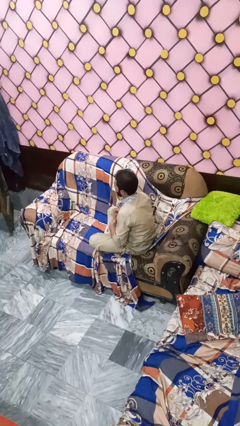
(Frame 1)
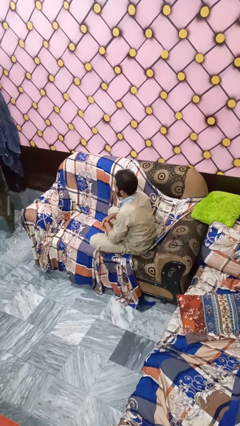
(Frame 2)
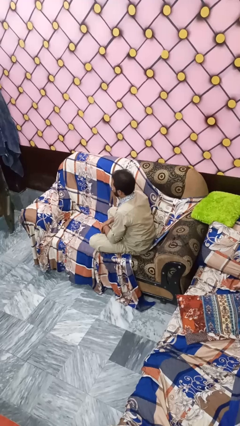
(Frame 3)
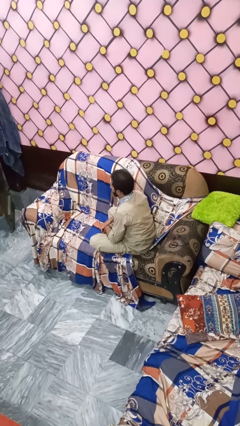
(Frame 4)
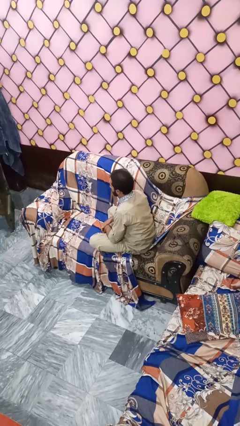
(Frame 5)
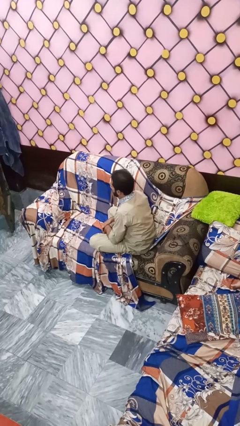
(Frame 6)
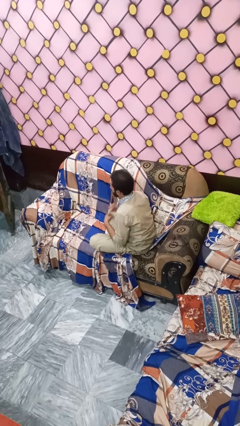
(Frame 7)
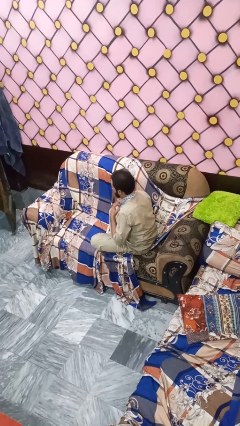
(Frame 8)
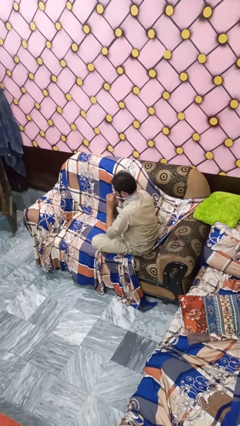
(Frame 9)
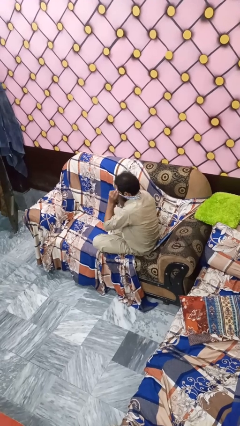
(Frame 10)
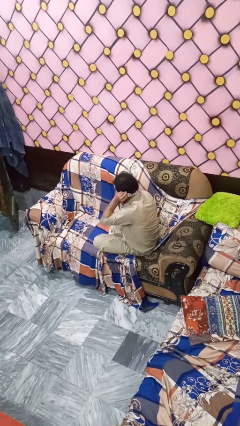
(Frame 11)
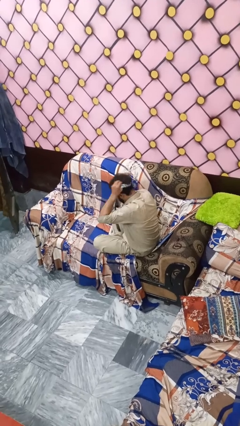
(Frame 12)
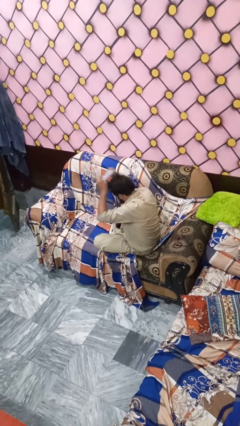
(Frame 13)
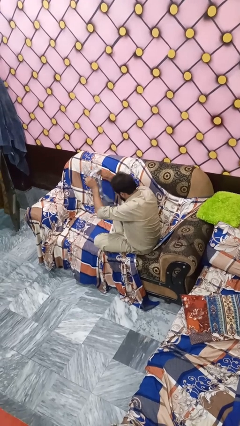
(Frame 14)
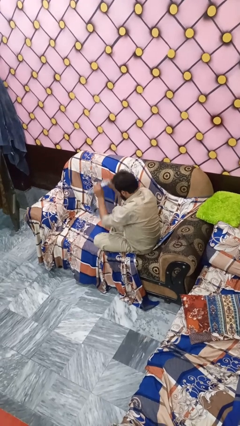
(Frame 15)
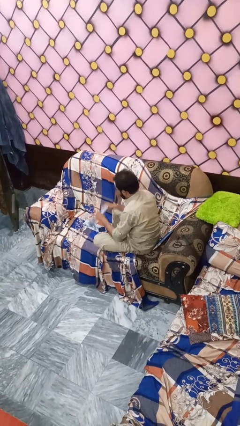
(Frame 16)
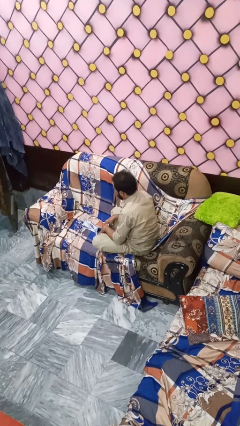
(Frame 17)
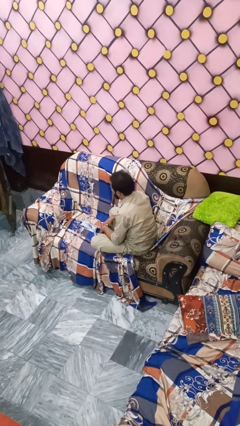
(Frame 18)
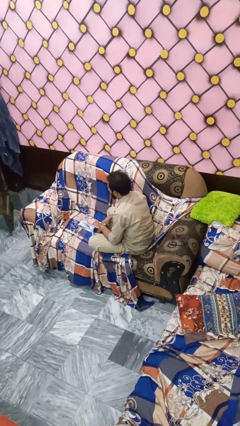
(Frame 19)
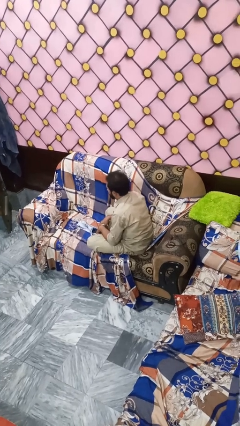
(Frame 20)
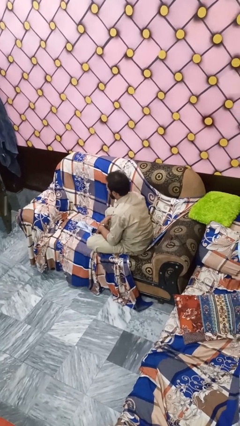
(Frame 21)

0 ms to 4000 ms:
person takes off necktie

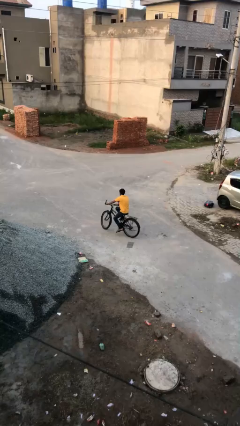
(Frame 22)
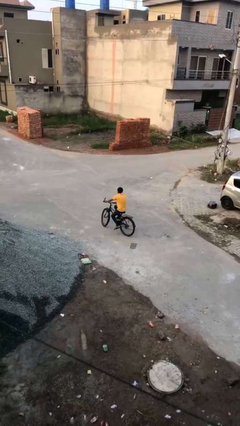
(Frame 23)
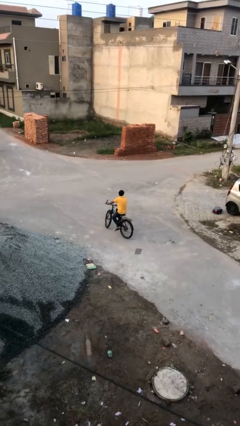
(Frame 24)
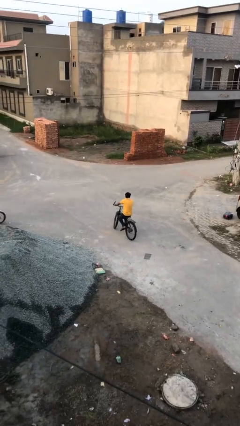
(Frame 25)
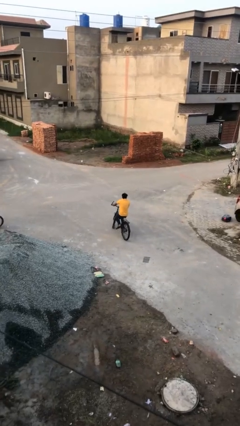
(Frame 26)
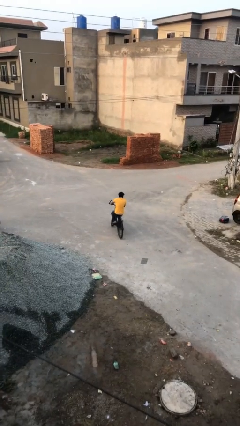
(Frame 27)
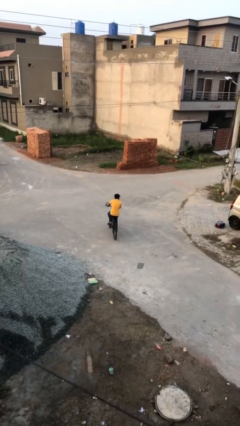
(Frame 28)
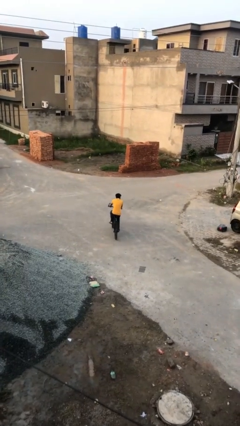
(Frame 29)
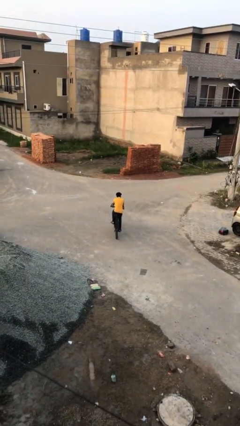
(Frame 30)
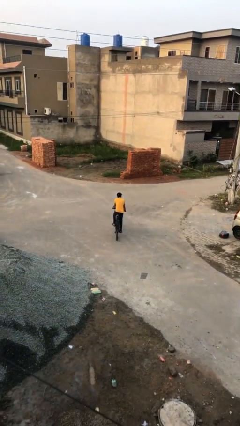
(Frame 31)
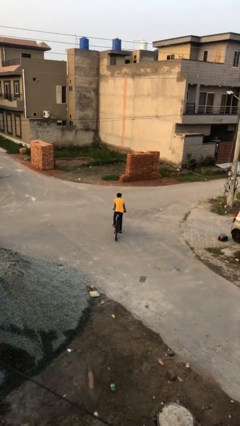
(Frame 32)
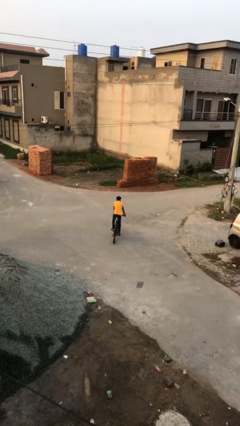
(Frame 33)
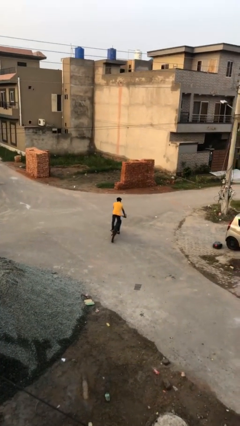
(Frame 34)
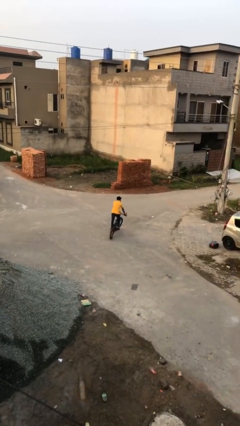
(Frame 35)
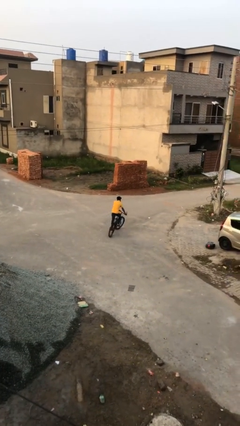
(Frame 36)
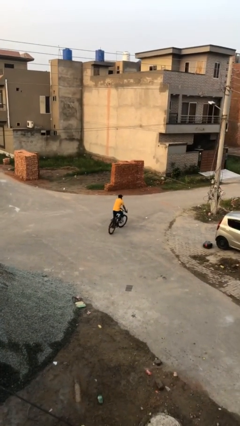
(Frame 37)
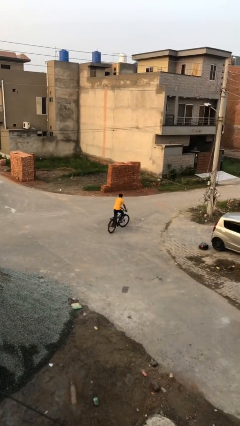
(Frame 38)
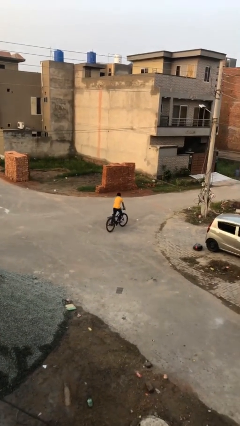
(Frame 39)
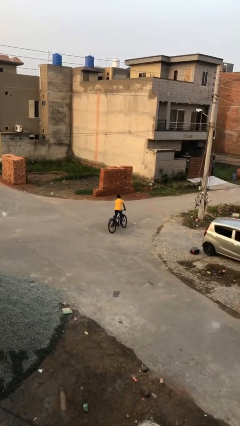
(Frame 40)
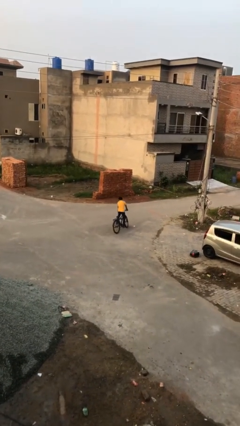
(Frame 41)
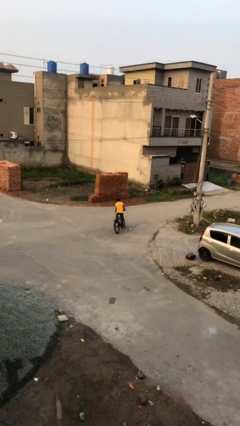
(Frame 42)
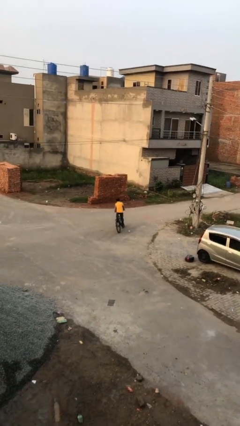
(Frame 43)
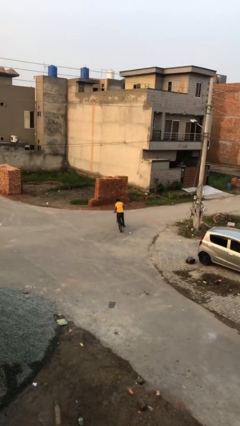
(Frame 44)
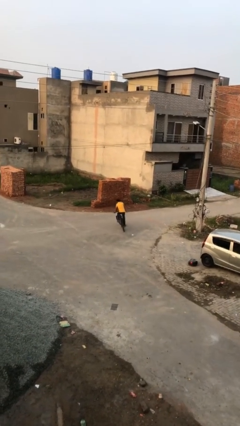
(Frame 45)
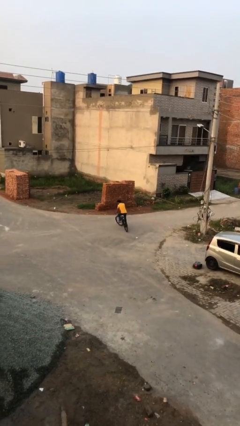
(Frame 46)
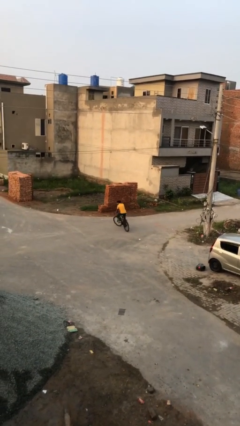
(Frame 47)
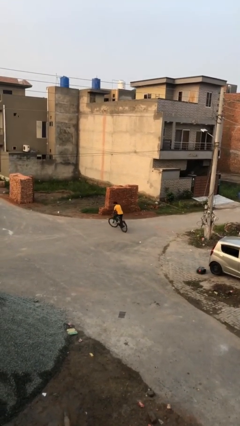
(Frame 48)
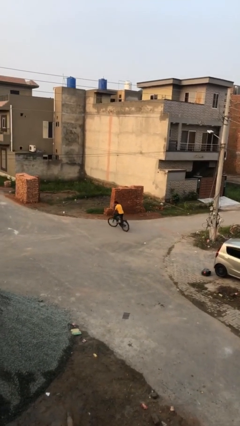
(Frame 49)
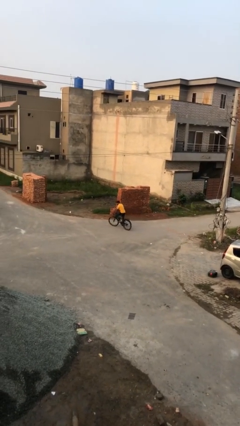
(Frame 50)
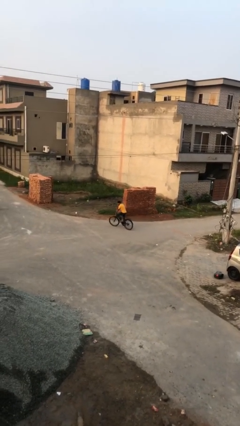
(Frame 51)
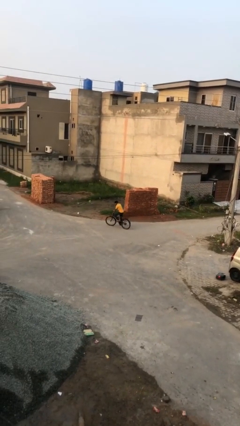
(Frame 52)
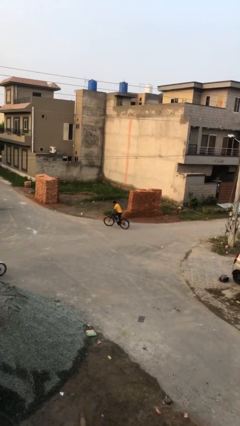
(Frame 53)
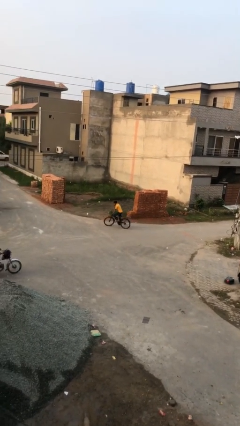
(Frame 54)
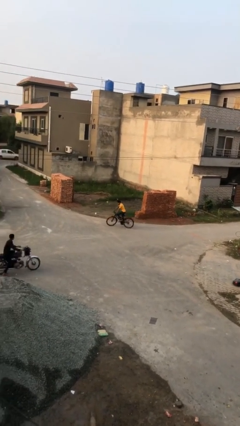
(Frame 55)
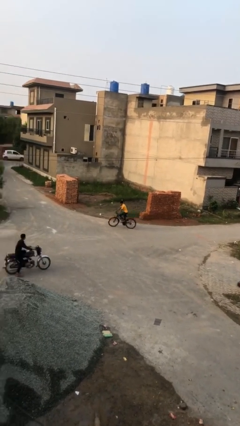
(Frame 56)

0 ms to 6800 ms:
person rides bicycle

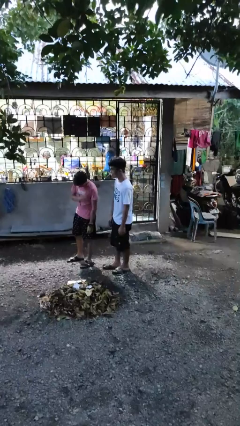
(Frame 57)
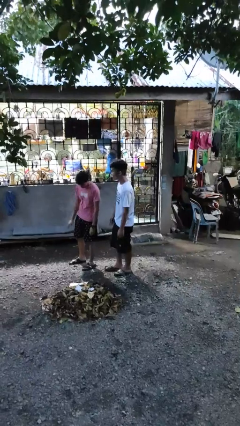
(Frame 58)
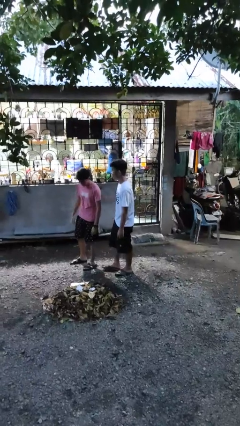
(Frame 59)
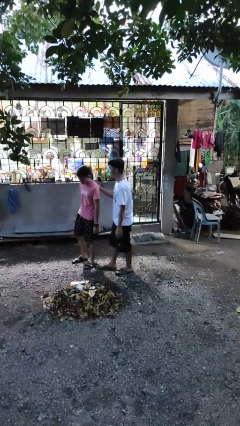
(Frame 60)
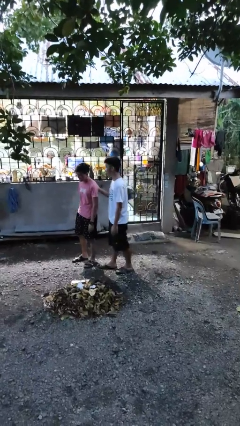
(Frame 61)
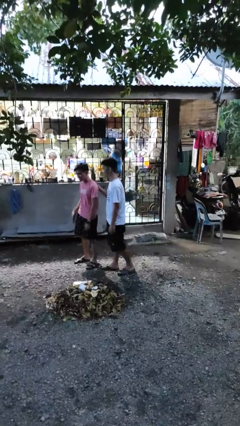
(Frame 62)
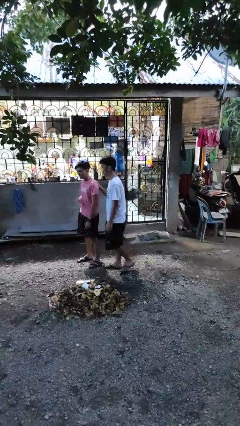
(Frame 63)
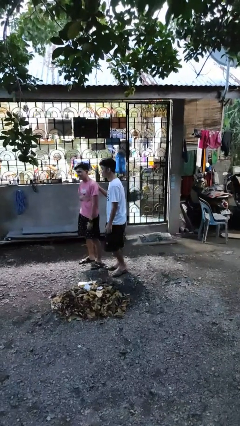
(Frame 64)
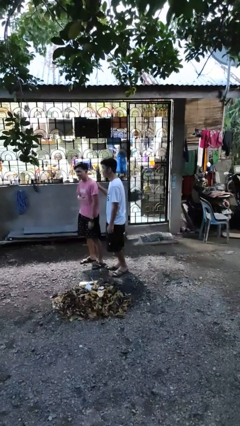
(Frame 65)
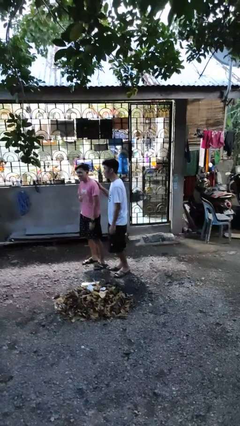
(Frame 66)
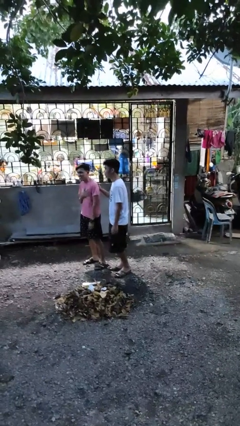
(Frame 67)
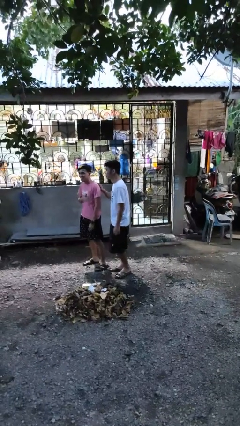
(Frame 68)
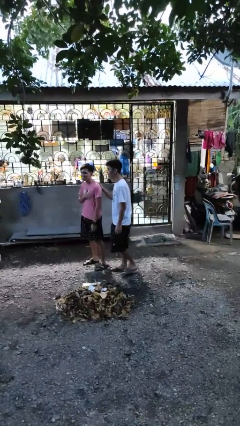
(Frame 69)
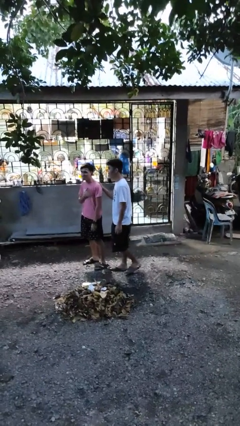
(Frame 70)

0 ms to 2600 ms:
person touches back of person

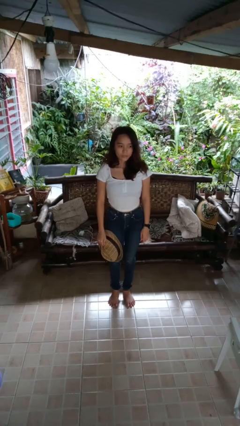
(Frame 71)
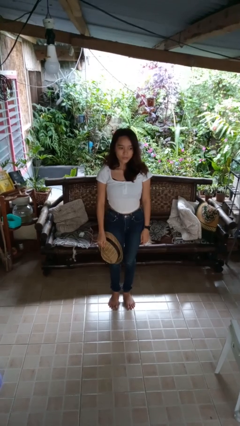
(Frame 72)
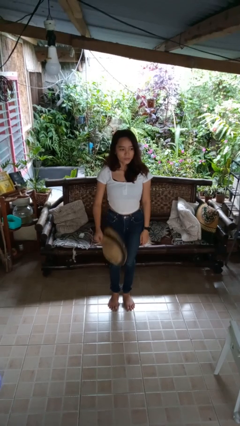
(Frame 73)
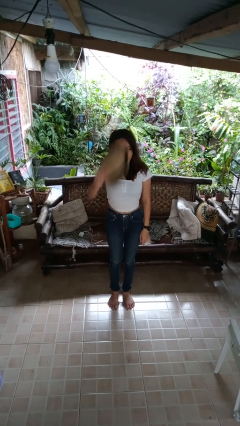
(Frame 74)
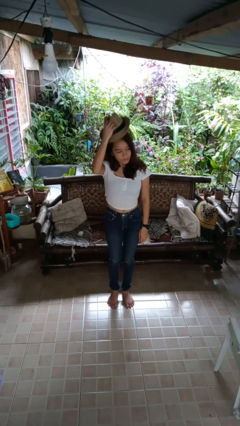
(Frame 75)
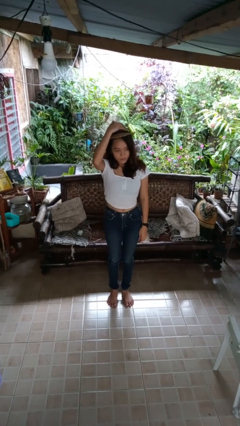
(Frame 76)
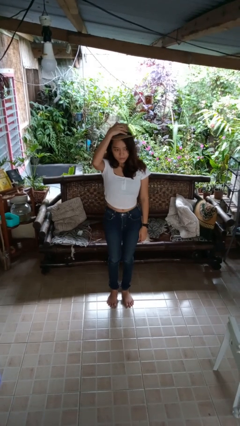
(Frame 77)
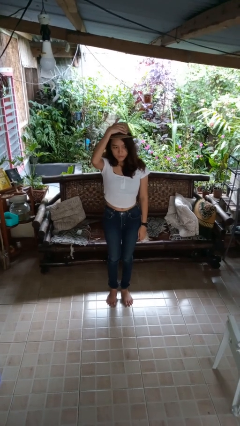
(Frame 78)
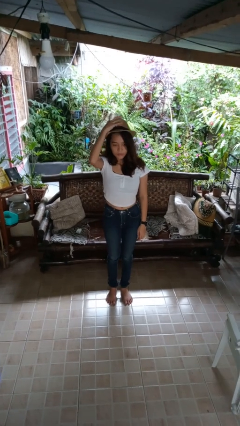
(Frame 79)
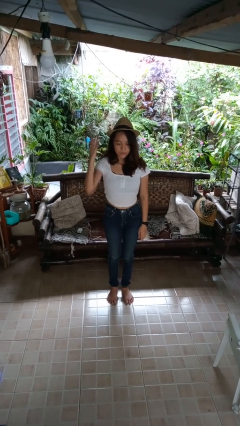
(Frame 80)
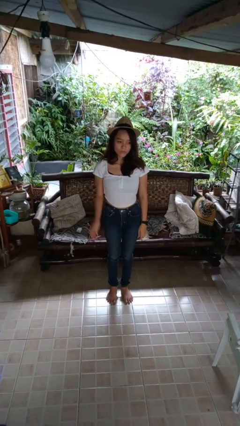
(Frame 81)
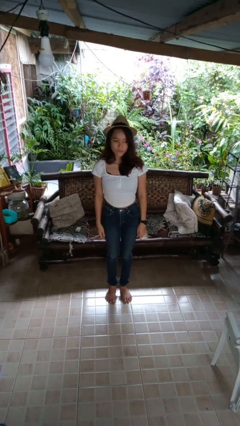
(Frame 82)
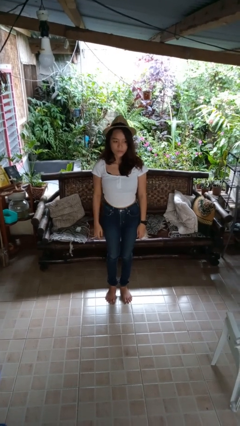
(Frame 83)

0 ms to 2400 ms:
person puts on hat

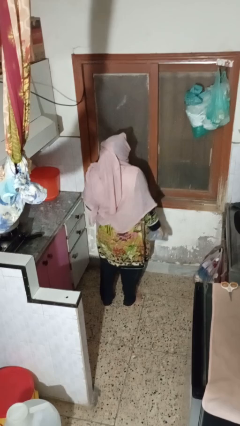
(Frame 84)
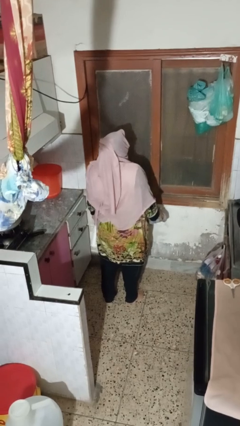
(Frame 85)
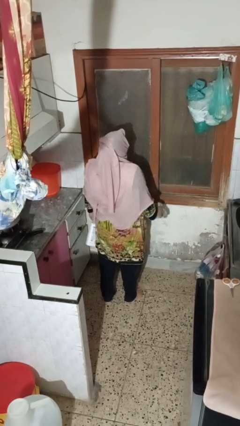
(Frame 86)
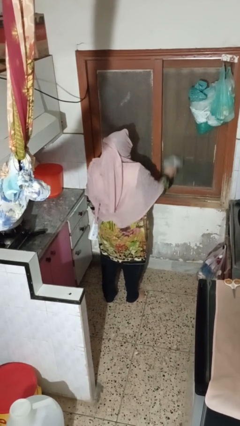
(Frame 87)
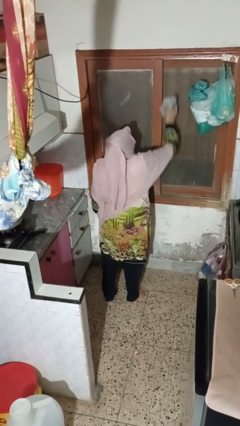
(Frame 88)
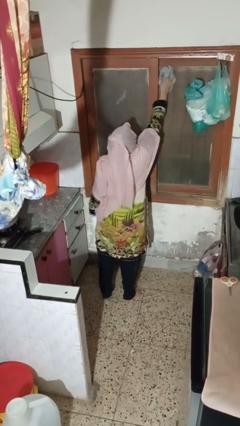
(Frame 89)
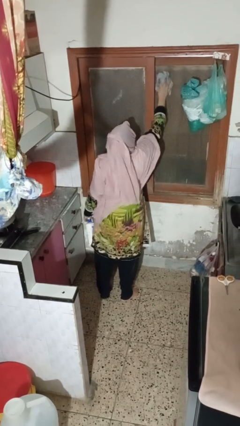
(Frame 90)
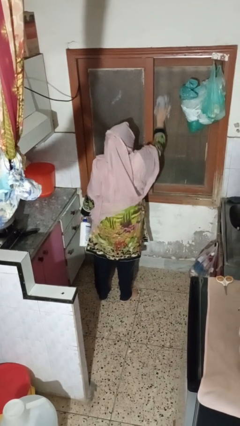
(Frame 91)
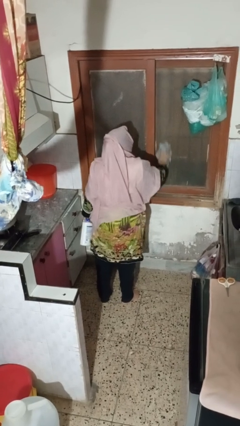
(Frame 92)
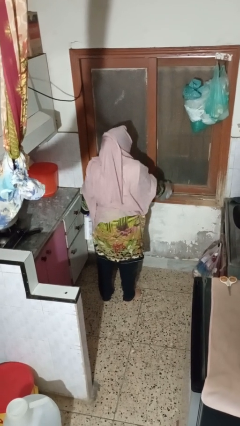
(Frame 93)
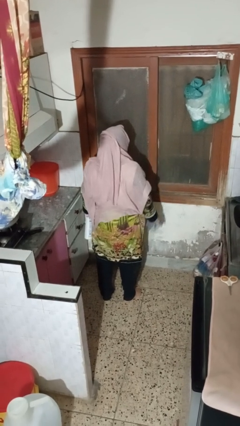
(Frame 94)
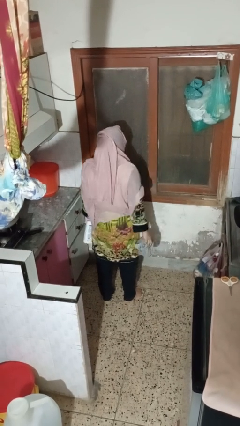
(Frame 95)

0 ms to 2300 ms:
person washes window
